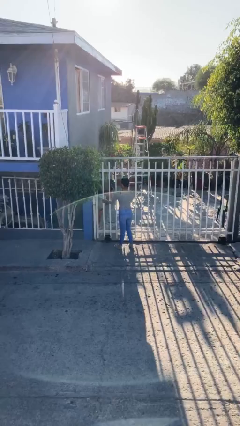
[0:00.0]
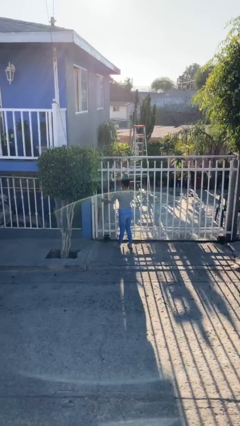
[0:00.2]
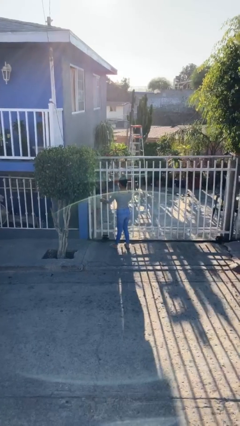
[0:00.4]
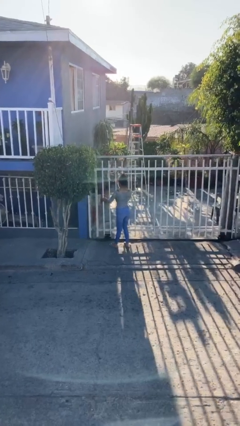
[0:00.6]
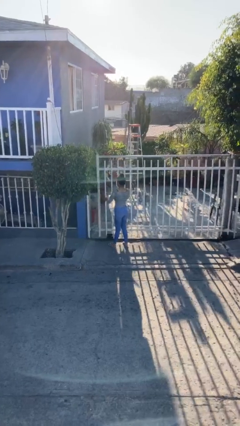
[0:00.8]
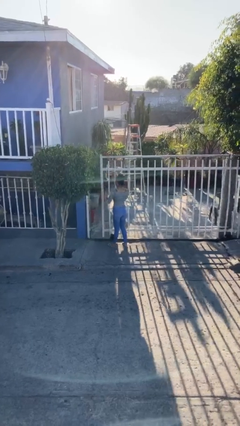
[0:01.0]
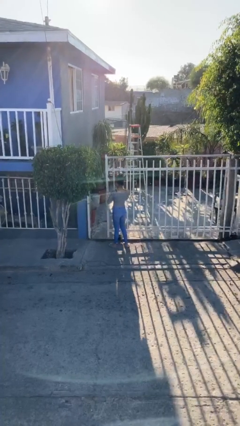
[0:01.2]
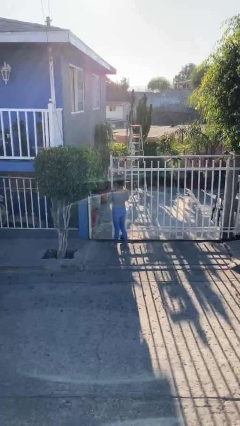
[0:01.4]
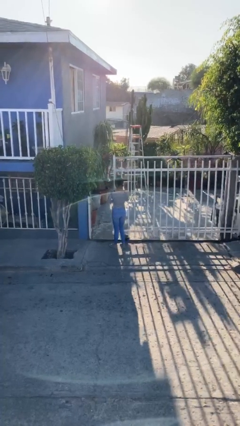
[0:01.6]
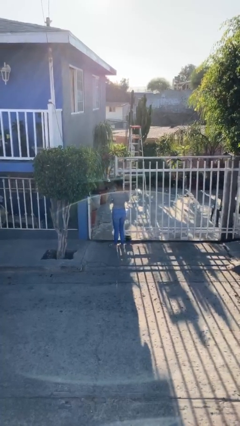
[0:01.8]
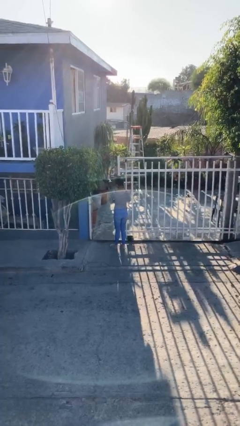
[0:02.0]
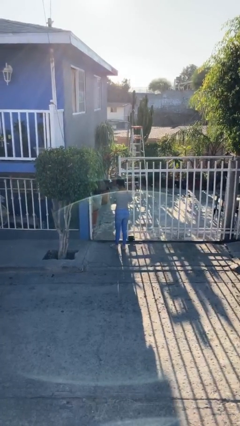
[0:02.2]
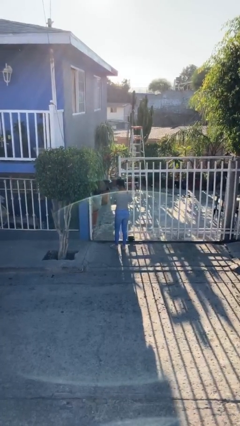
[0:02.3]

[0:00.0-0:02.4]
person opens facility door

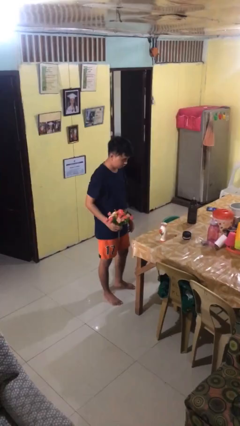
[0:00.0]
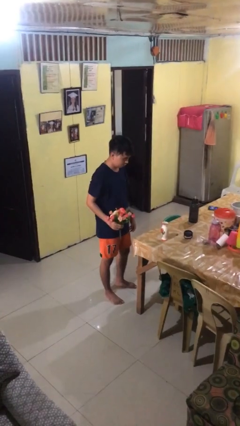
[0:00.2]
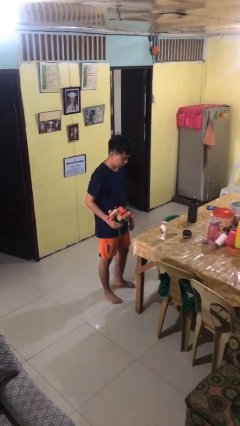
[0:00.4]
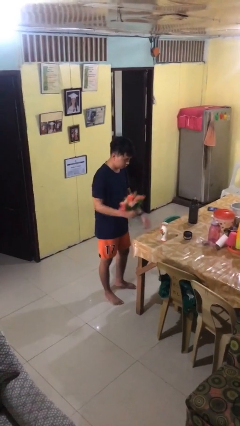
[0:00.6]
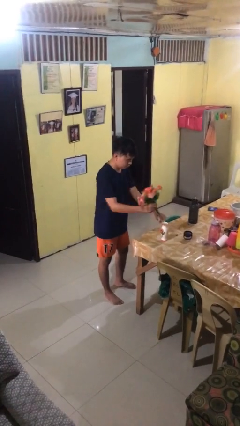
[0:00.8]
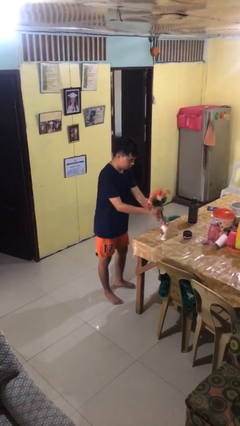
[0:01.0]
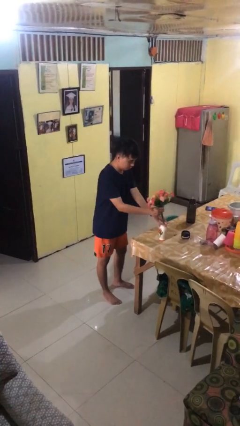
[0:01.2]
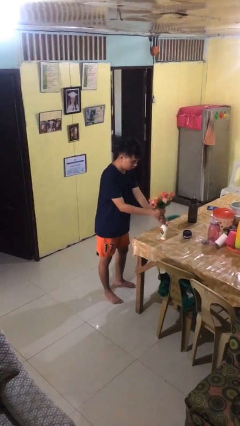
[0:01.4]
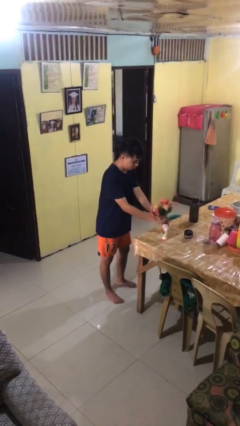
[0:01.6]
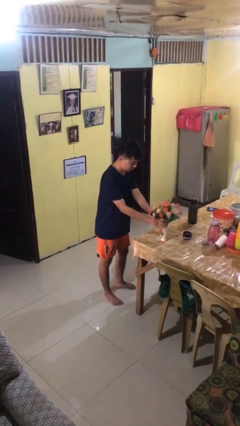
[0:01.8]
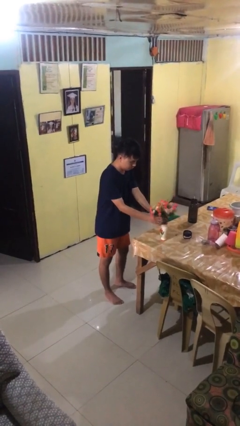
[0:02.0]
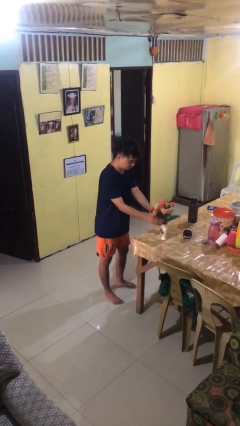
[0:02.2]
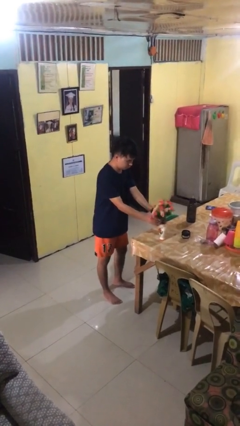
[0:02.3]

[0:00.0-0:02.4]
person arranges flowers in vase

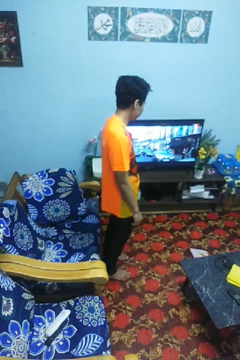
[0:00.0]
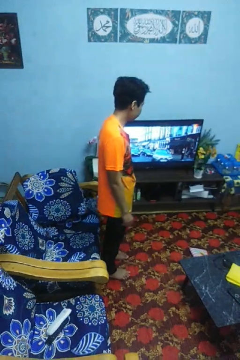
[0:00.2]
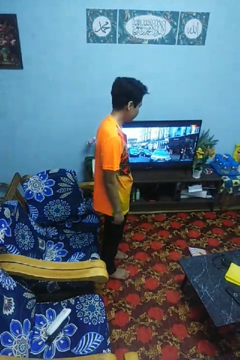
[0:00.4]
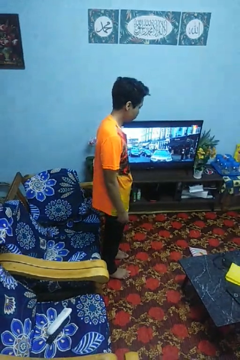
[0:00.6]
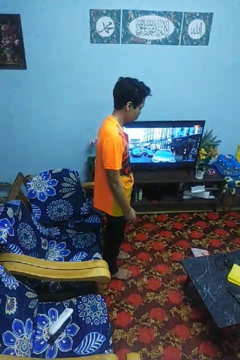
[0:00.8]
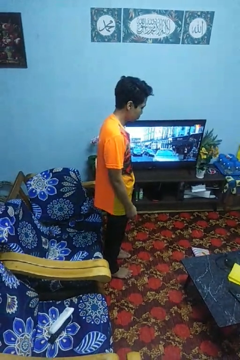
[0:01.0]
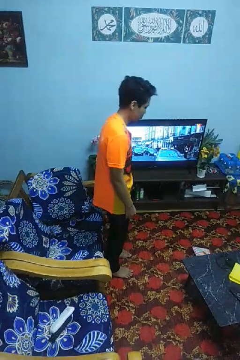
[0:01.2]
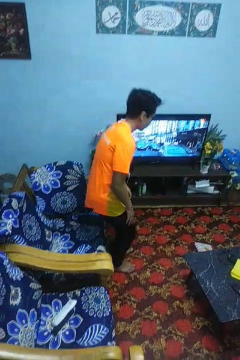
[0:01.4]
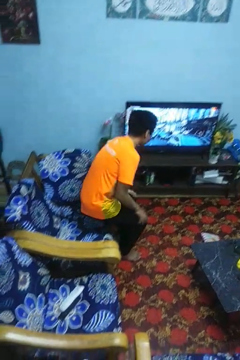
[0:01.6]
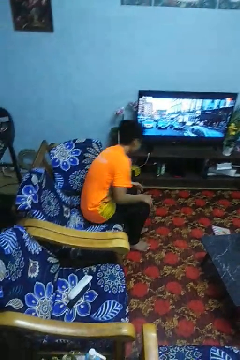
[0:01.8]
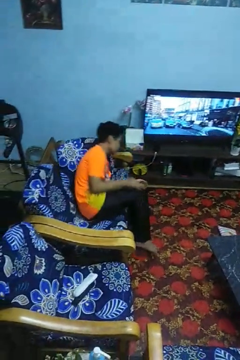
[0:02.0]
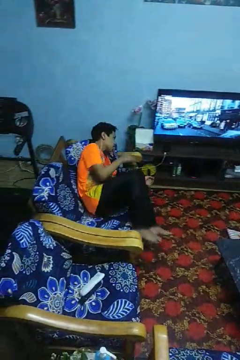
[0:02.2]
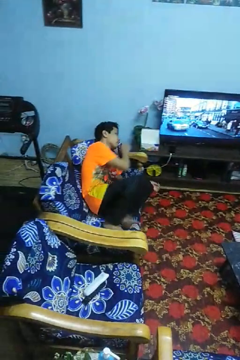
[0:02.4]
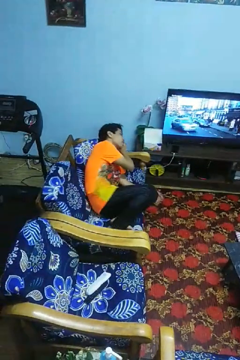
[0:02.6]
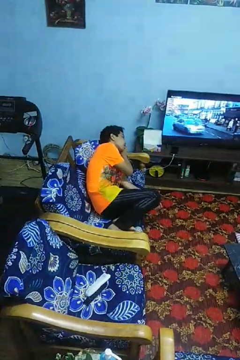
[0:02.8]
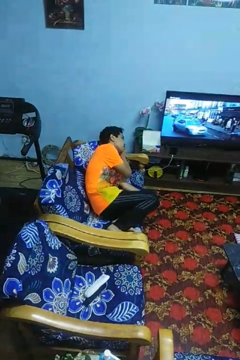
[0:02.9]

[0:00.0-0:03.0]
person lies down on couch

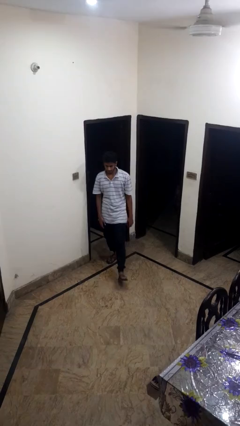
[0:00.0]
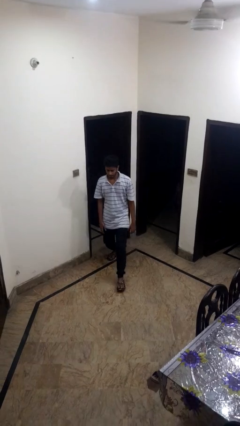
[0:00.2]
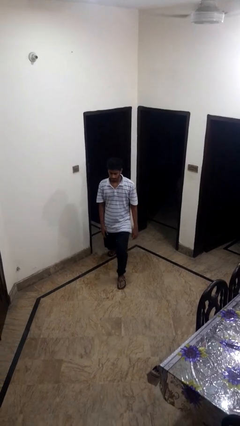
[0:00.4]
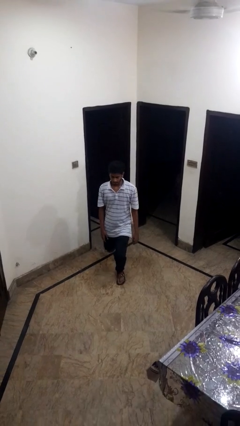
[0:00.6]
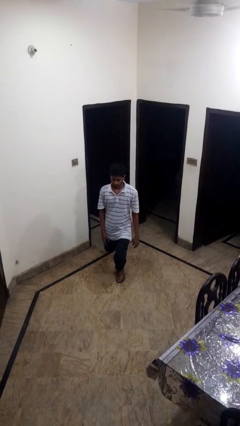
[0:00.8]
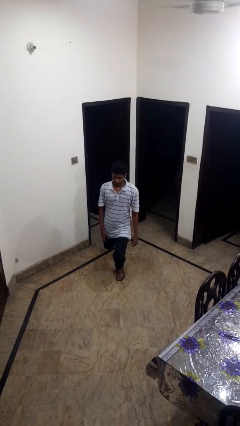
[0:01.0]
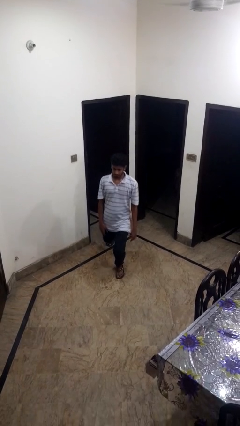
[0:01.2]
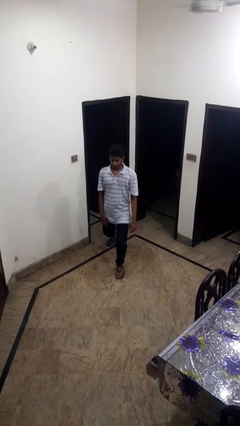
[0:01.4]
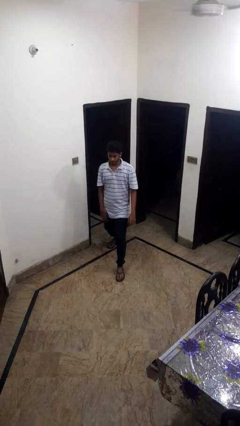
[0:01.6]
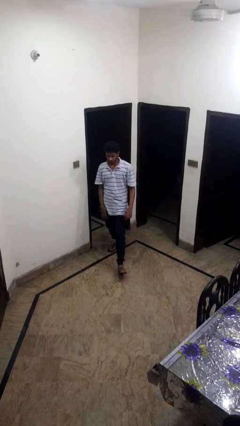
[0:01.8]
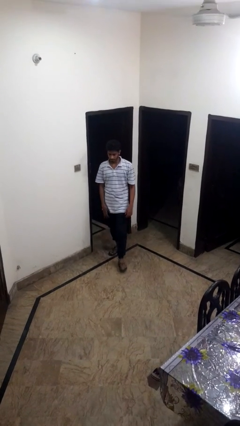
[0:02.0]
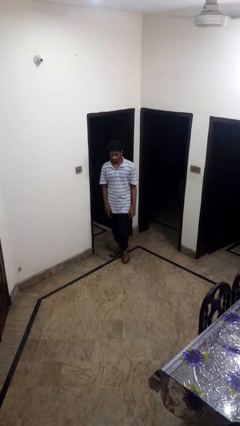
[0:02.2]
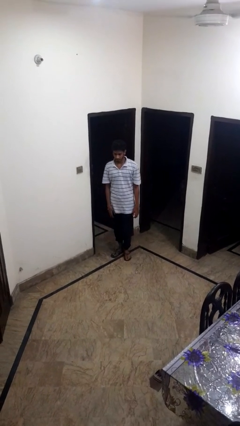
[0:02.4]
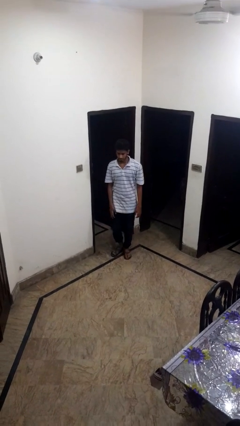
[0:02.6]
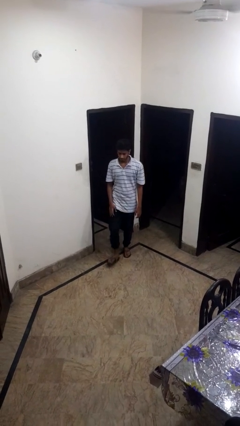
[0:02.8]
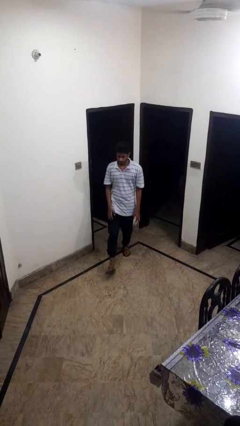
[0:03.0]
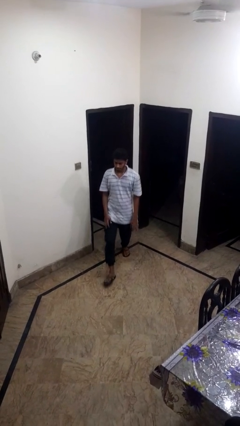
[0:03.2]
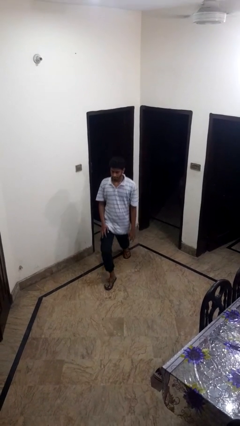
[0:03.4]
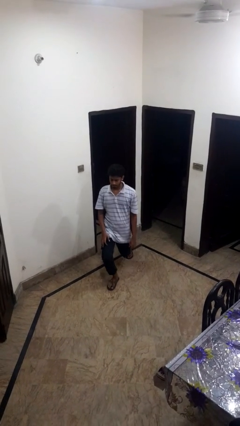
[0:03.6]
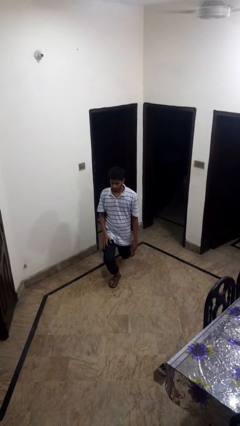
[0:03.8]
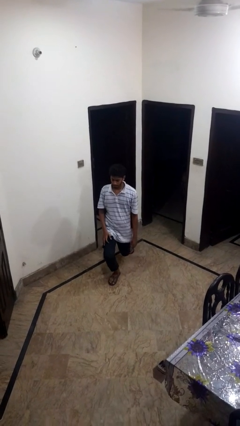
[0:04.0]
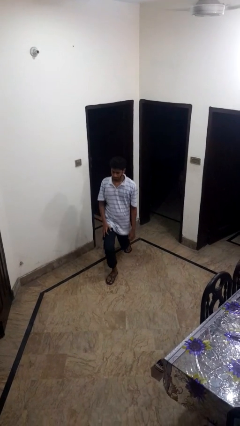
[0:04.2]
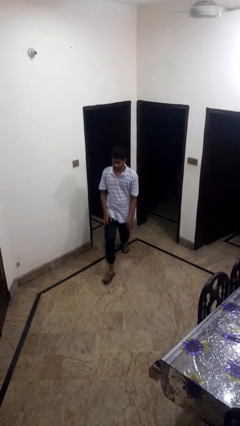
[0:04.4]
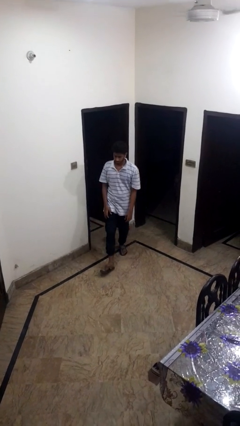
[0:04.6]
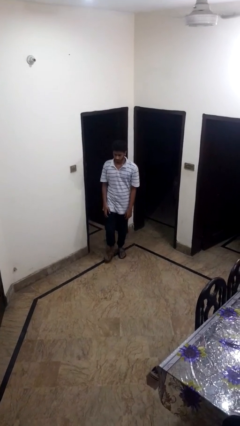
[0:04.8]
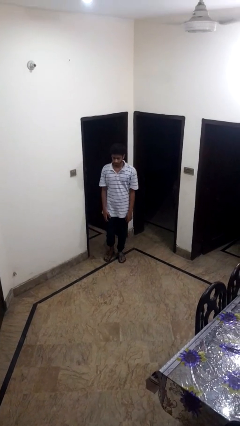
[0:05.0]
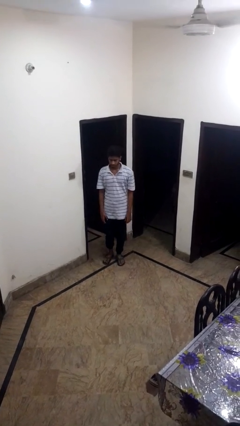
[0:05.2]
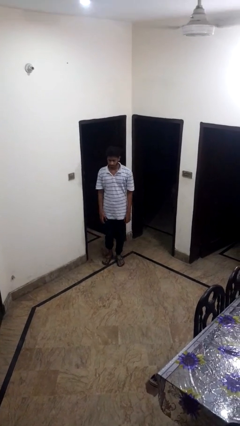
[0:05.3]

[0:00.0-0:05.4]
person exercises with lunges

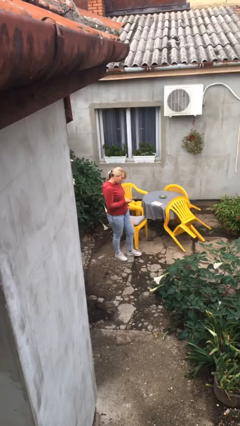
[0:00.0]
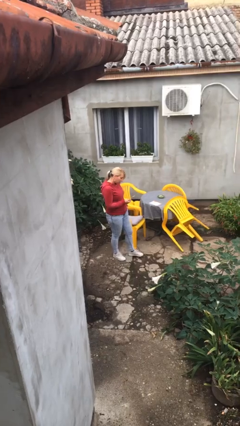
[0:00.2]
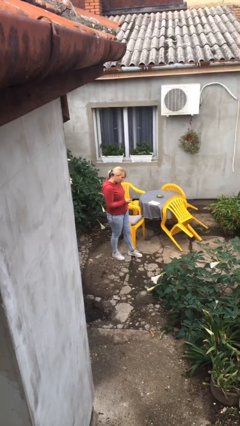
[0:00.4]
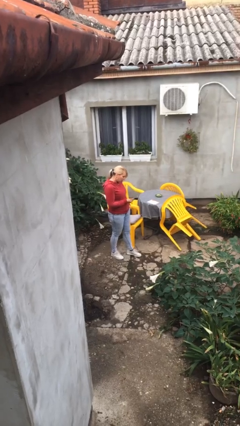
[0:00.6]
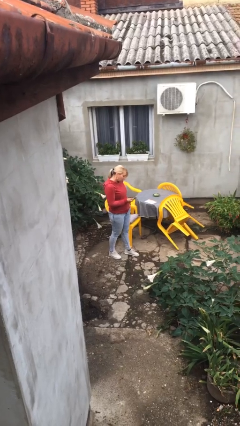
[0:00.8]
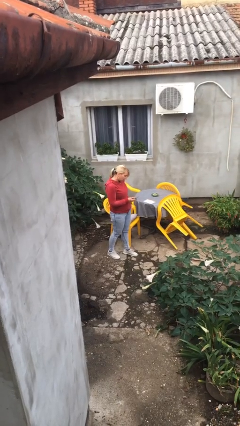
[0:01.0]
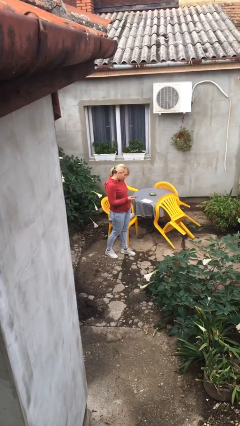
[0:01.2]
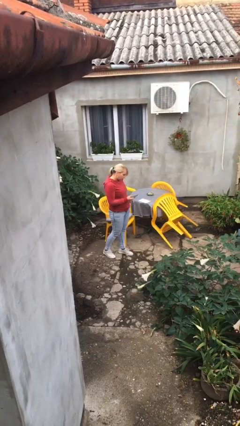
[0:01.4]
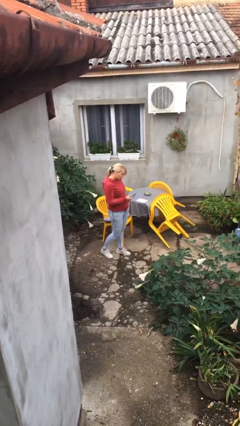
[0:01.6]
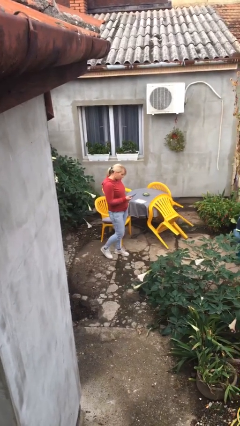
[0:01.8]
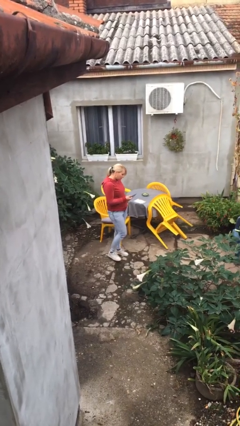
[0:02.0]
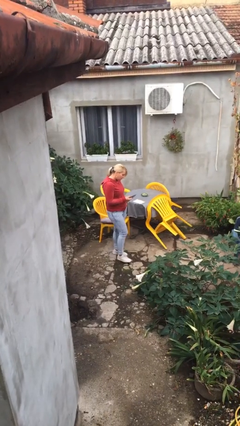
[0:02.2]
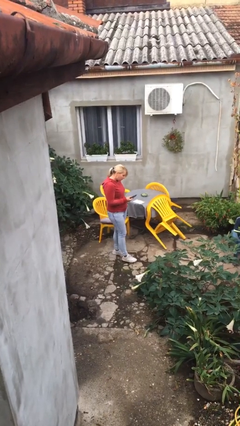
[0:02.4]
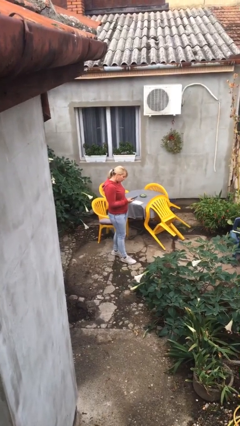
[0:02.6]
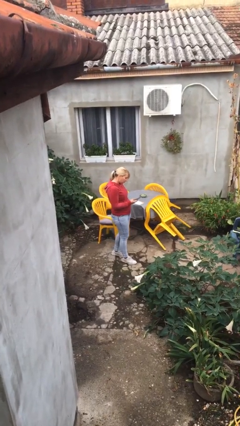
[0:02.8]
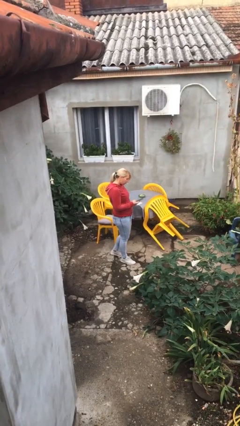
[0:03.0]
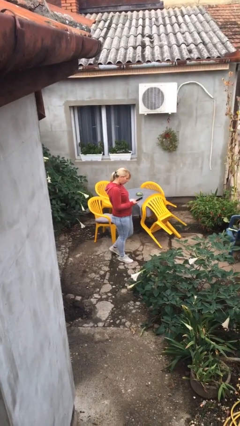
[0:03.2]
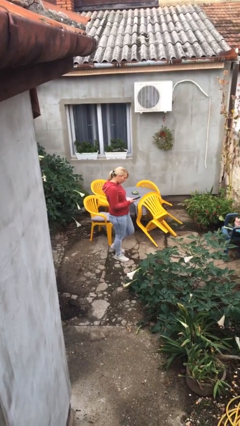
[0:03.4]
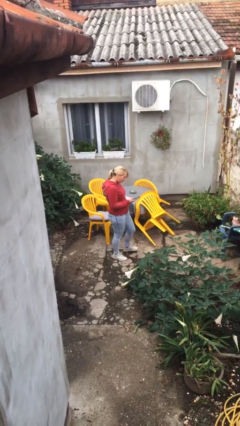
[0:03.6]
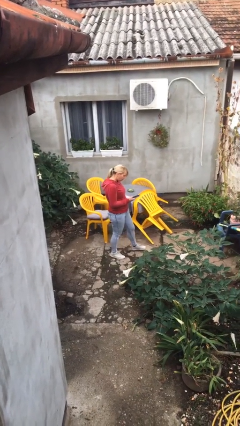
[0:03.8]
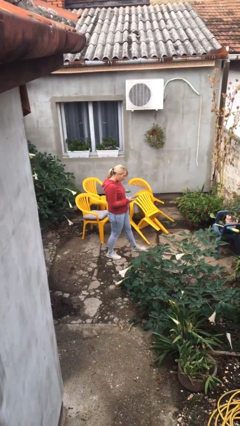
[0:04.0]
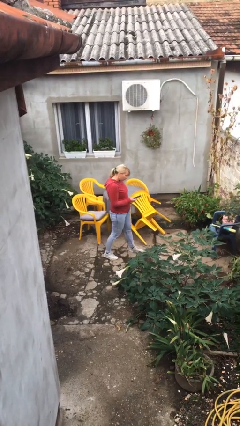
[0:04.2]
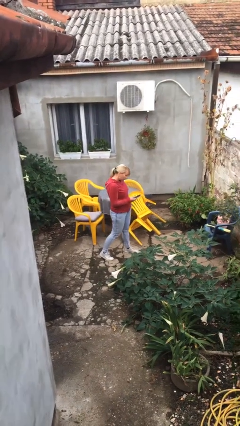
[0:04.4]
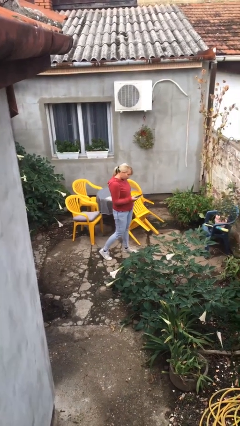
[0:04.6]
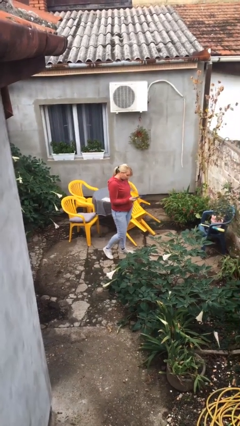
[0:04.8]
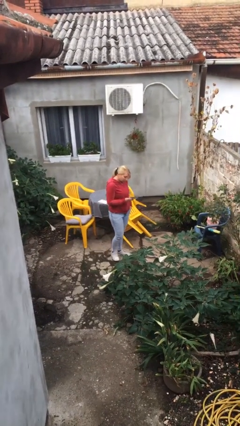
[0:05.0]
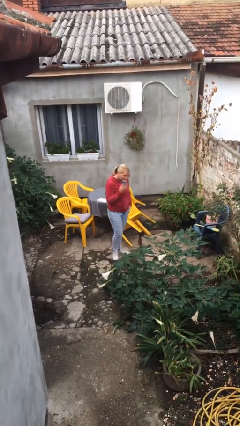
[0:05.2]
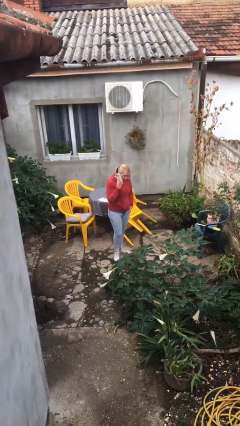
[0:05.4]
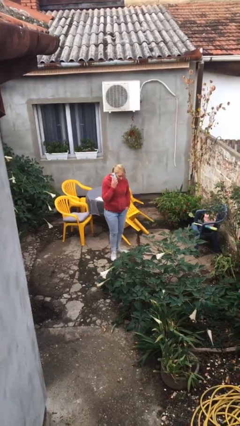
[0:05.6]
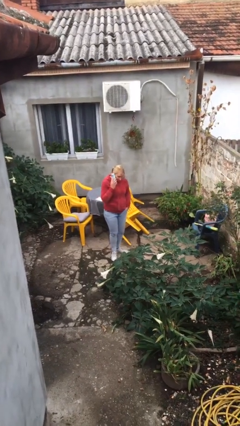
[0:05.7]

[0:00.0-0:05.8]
person texts on phone
